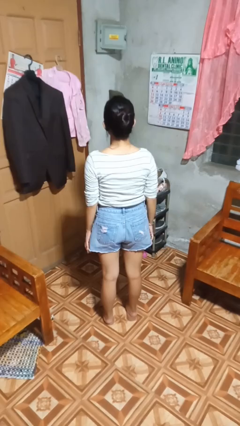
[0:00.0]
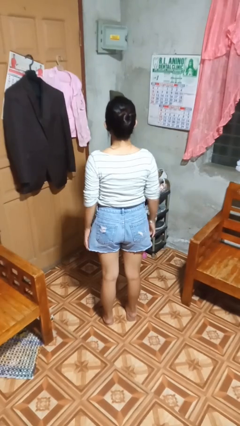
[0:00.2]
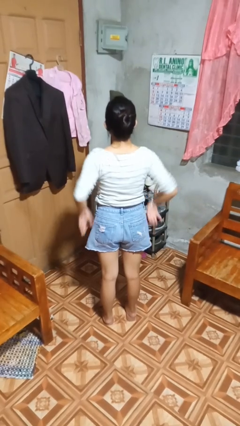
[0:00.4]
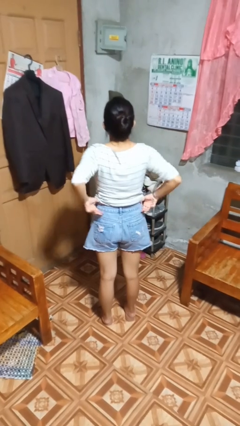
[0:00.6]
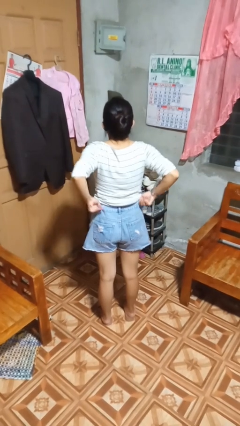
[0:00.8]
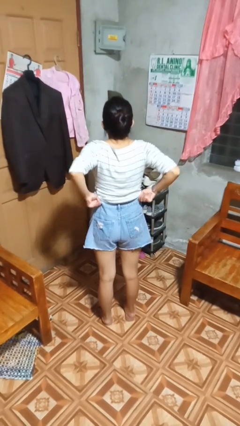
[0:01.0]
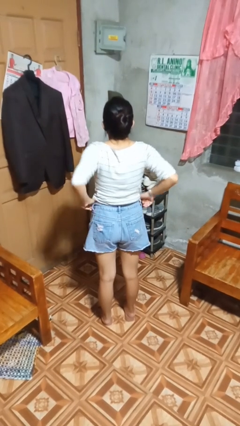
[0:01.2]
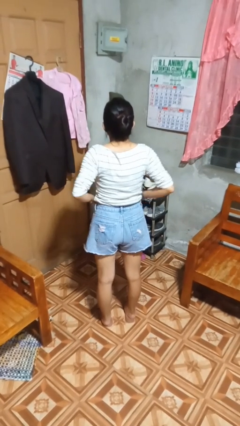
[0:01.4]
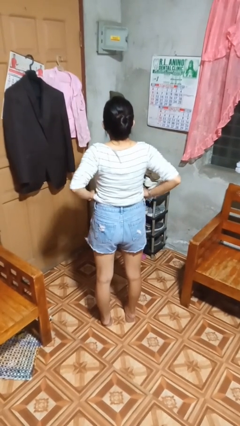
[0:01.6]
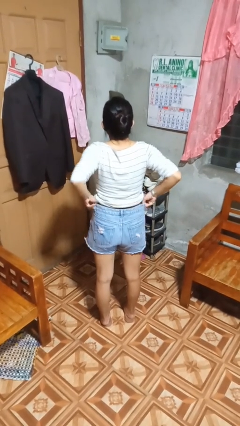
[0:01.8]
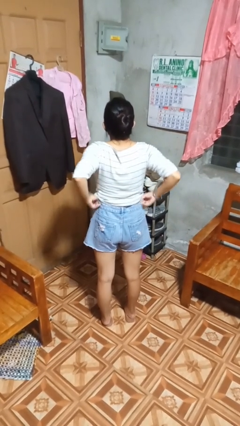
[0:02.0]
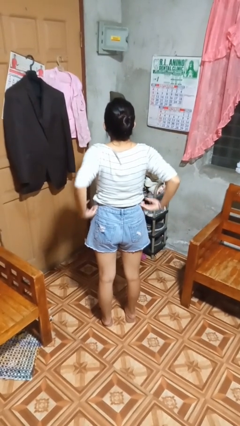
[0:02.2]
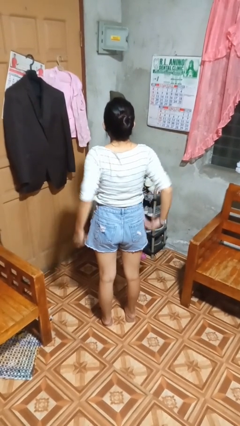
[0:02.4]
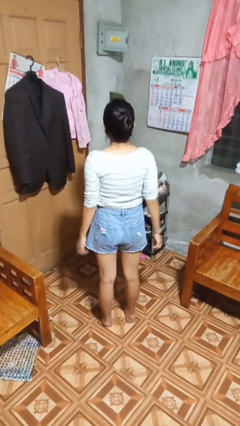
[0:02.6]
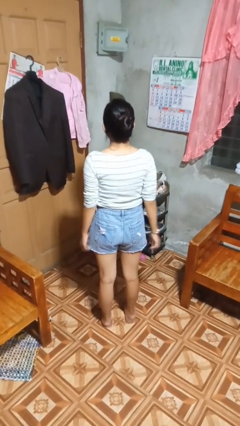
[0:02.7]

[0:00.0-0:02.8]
person hikes up pants

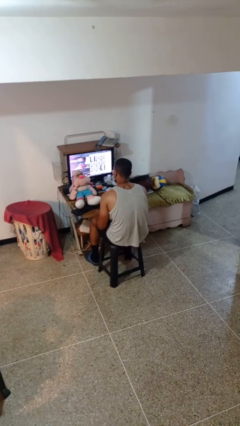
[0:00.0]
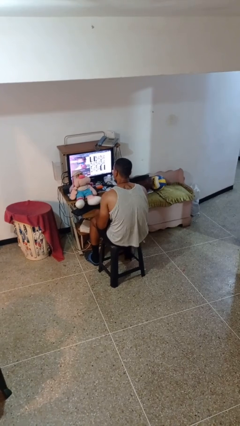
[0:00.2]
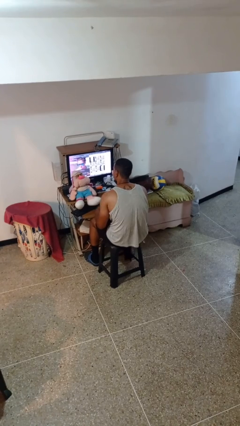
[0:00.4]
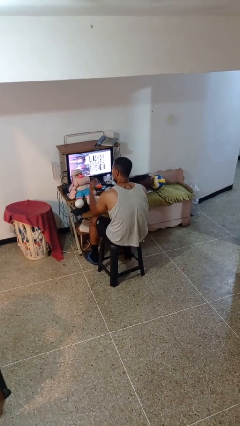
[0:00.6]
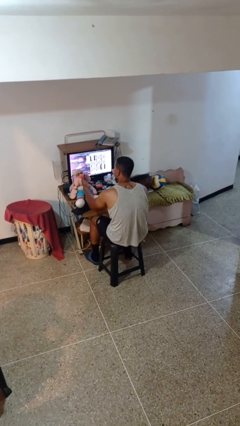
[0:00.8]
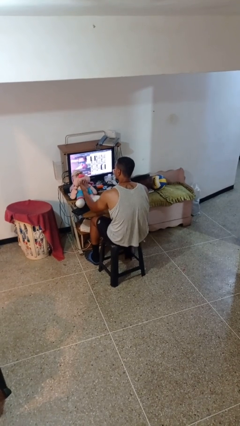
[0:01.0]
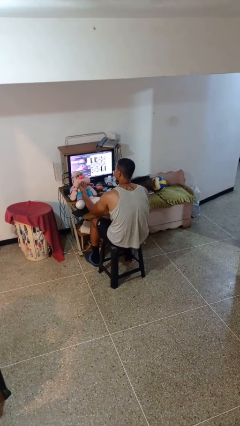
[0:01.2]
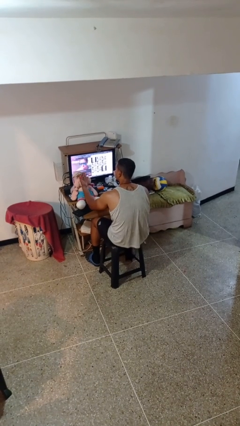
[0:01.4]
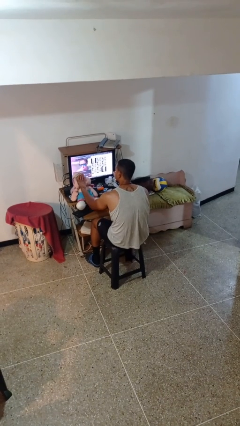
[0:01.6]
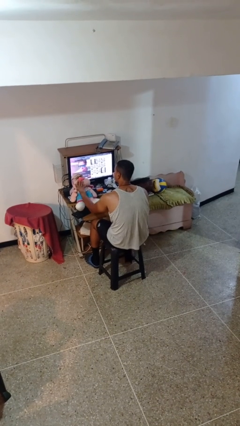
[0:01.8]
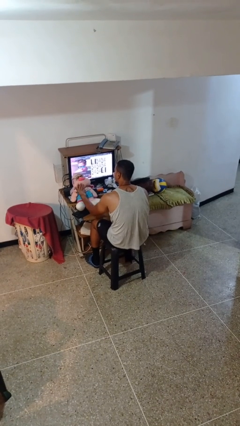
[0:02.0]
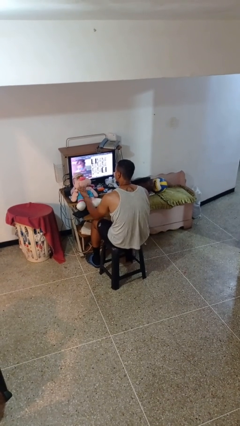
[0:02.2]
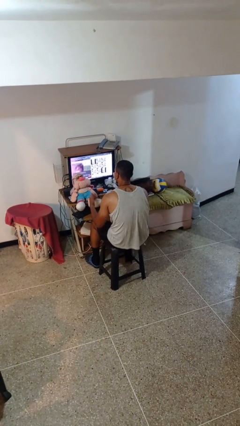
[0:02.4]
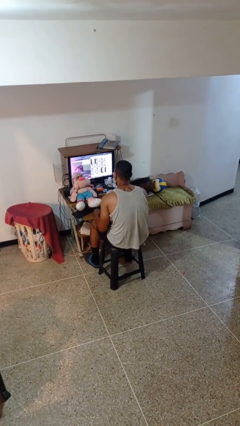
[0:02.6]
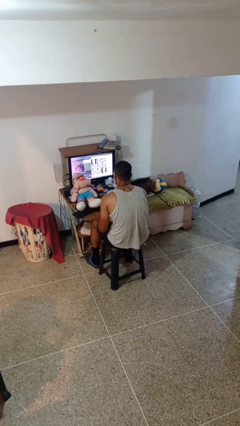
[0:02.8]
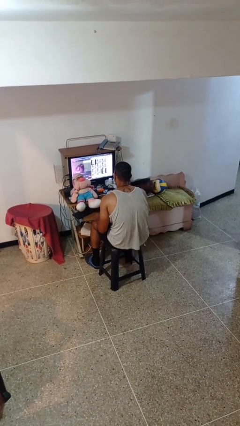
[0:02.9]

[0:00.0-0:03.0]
person waves hand over object

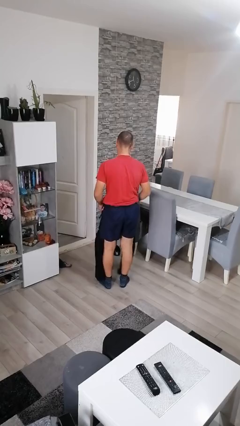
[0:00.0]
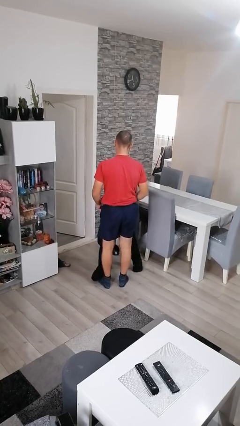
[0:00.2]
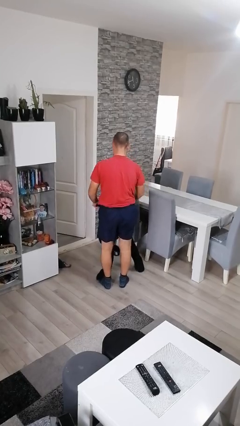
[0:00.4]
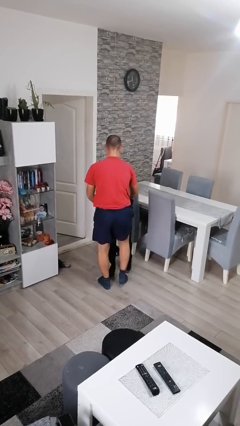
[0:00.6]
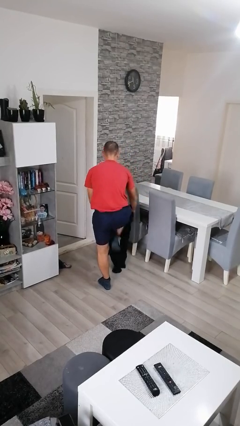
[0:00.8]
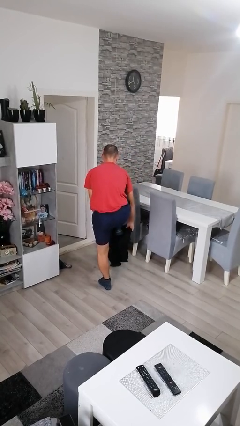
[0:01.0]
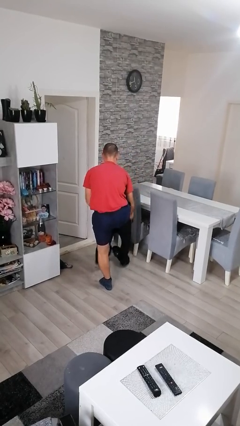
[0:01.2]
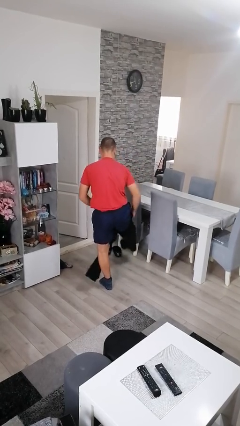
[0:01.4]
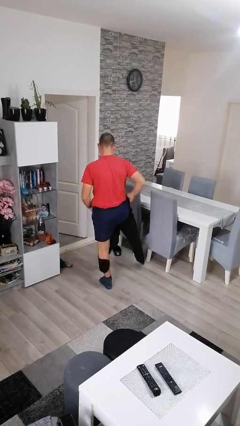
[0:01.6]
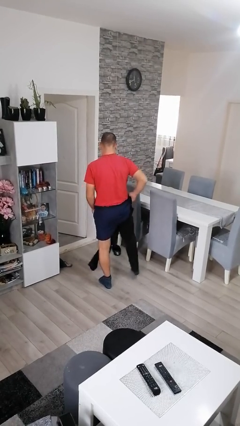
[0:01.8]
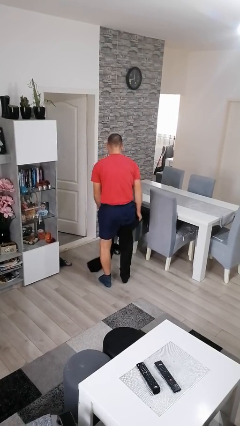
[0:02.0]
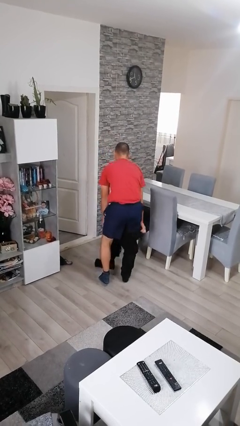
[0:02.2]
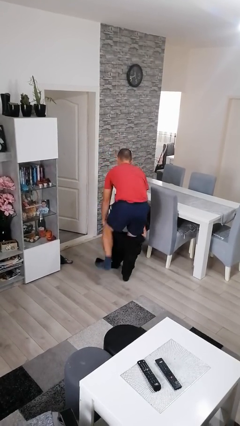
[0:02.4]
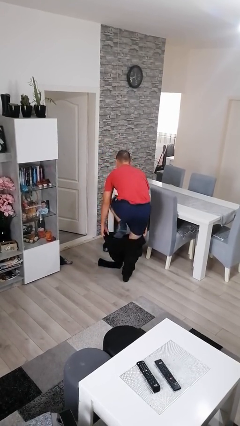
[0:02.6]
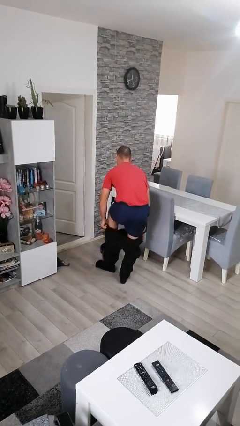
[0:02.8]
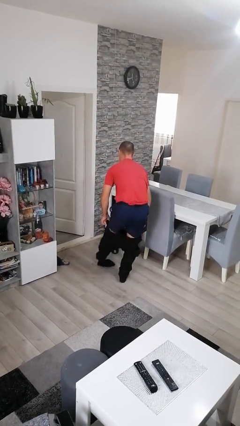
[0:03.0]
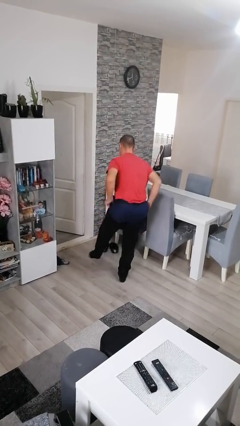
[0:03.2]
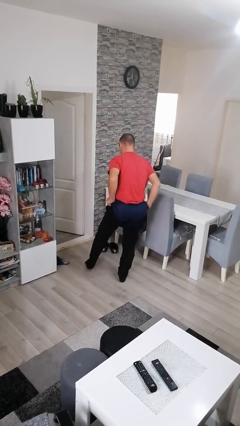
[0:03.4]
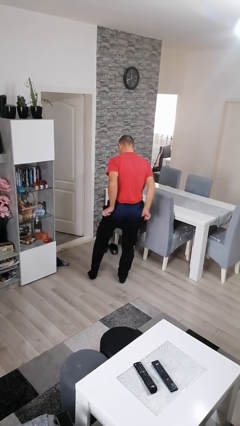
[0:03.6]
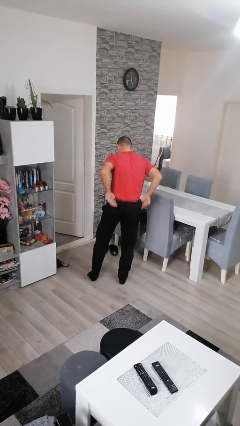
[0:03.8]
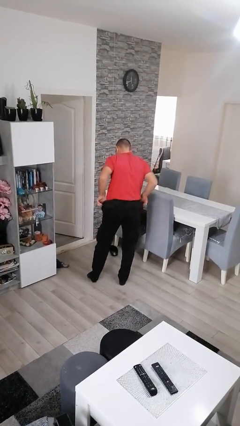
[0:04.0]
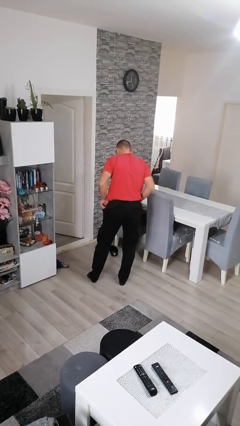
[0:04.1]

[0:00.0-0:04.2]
person puts on pants

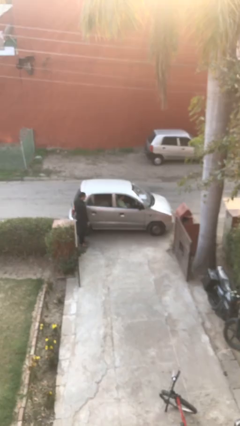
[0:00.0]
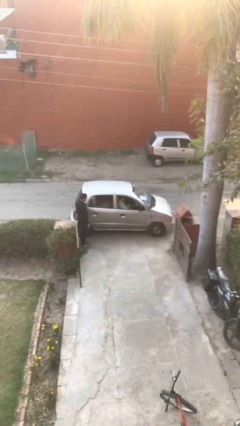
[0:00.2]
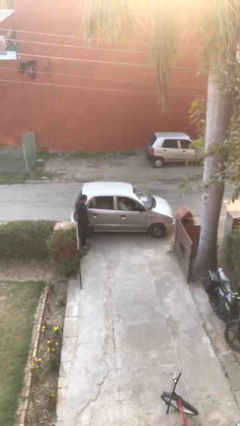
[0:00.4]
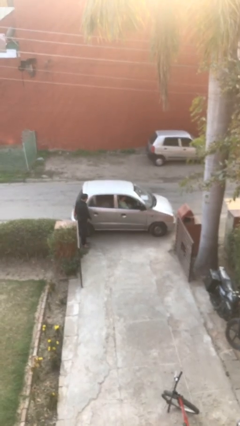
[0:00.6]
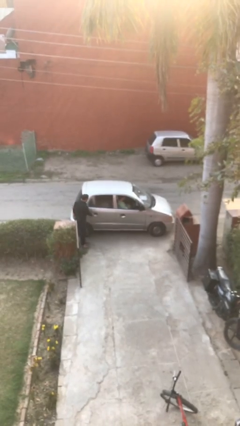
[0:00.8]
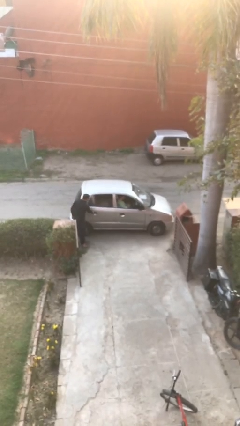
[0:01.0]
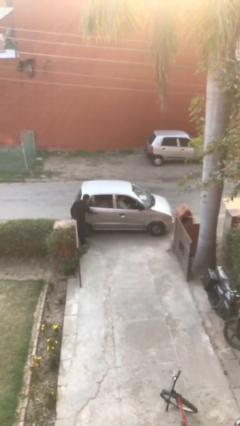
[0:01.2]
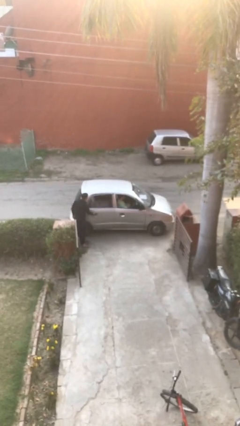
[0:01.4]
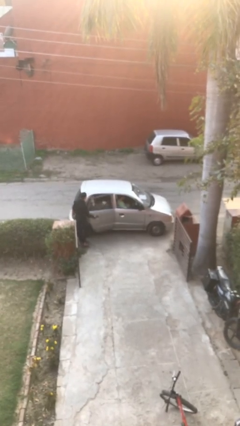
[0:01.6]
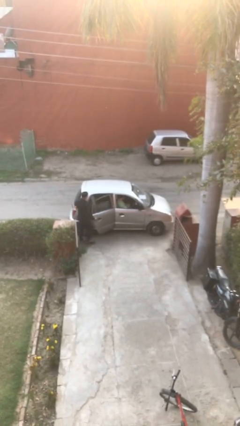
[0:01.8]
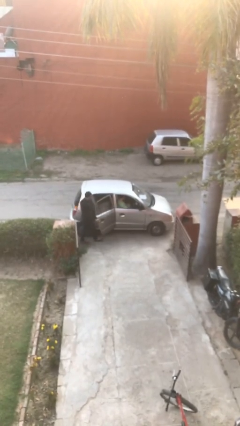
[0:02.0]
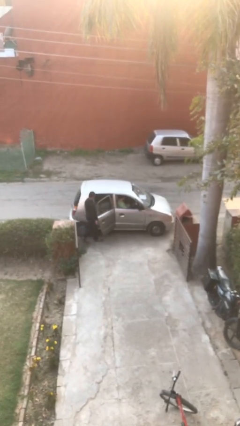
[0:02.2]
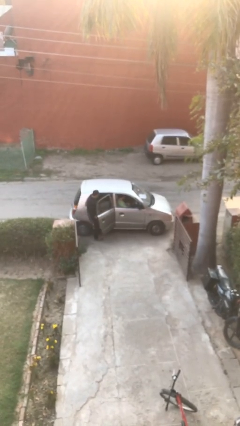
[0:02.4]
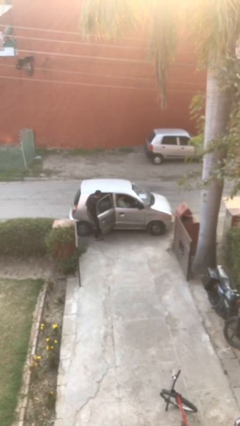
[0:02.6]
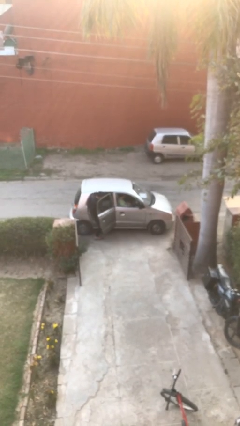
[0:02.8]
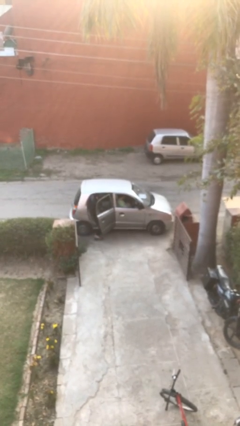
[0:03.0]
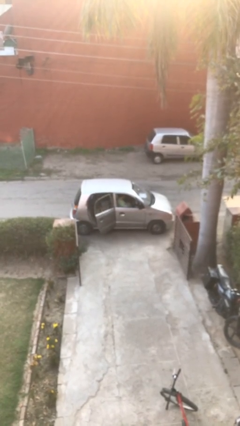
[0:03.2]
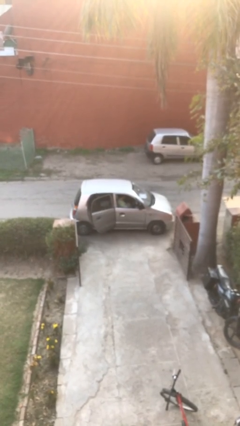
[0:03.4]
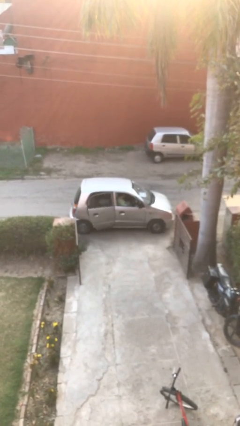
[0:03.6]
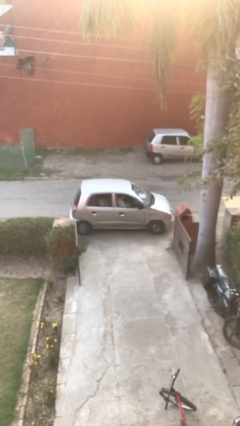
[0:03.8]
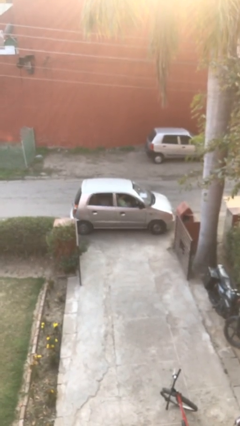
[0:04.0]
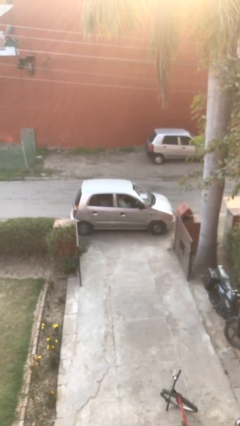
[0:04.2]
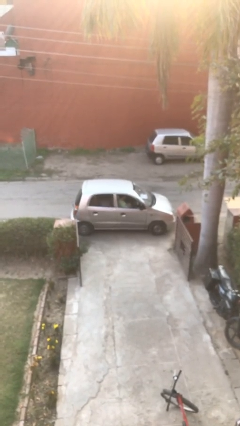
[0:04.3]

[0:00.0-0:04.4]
car picks up person

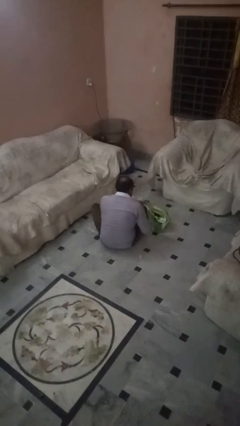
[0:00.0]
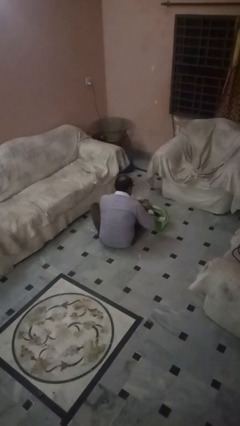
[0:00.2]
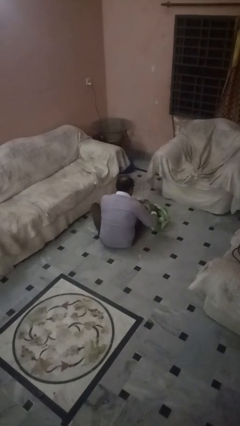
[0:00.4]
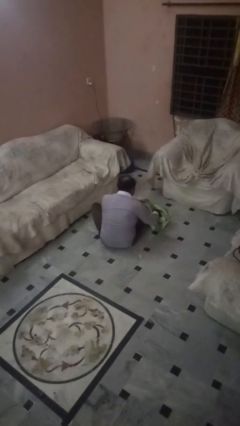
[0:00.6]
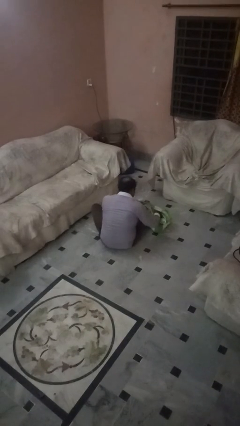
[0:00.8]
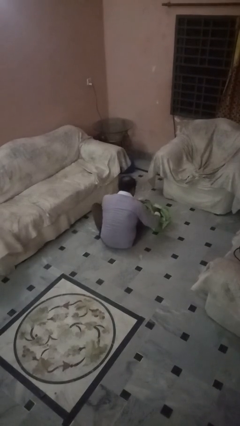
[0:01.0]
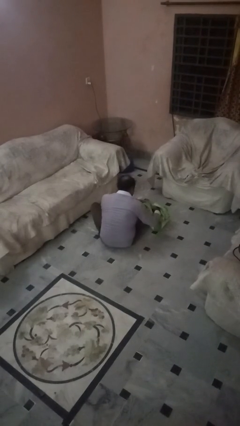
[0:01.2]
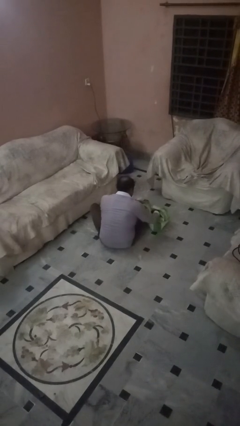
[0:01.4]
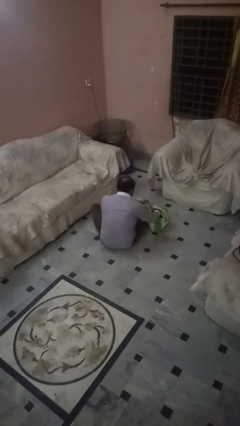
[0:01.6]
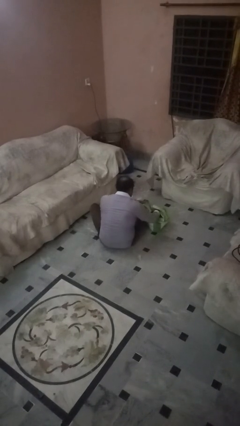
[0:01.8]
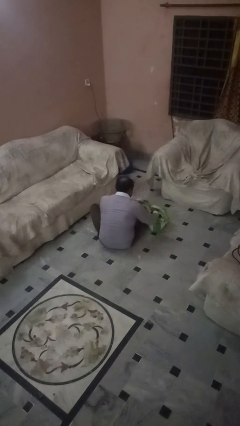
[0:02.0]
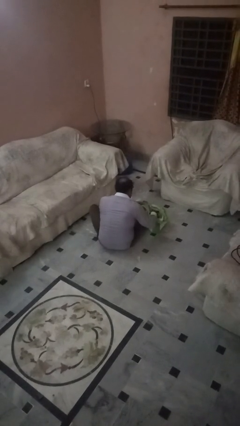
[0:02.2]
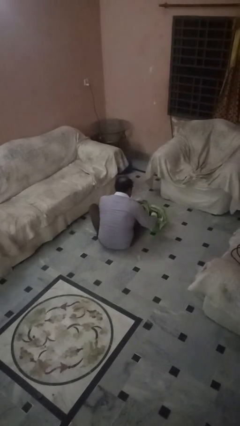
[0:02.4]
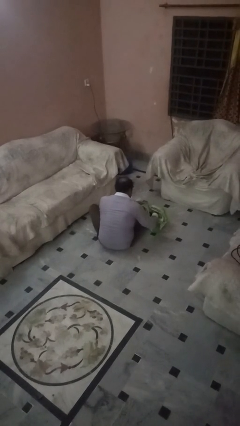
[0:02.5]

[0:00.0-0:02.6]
person searches in bag

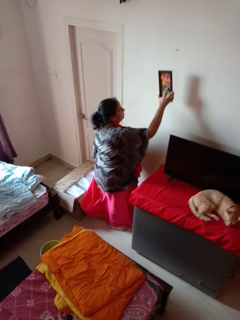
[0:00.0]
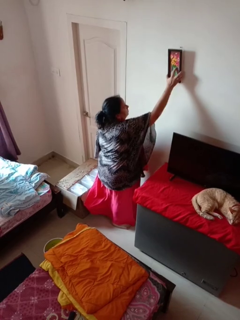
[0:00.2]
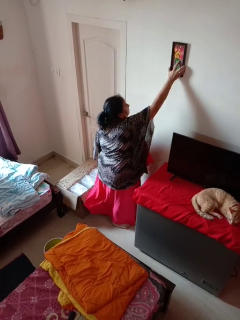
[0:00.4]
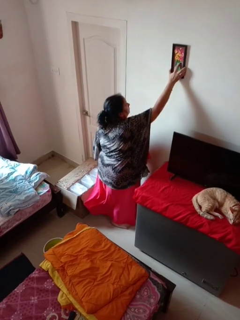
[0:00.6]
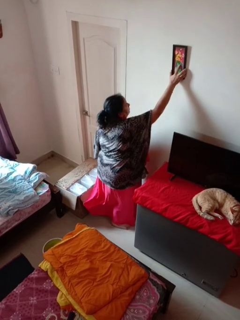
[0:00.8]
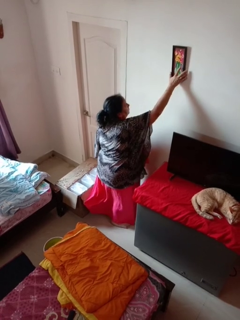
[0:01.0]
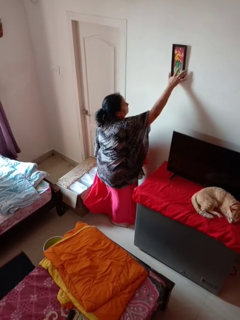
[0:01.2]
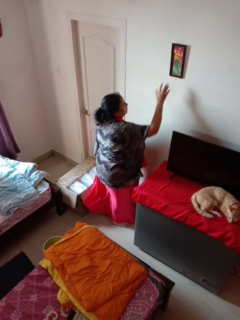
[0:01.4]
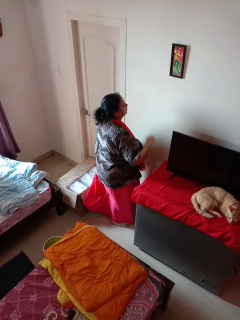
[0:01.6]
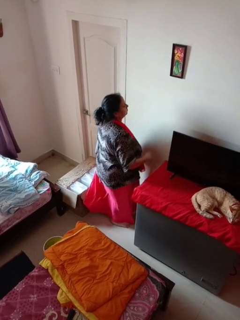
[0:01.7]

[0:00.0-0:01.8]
person puts up picture frame
